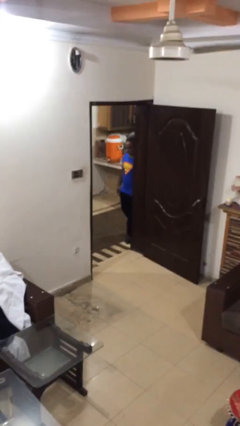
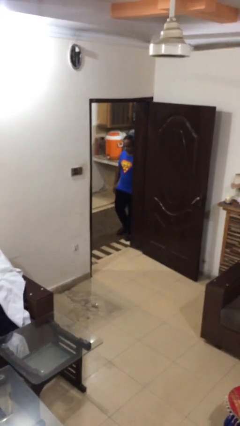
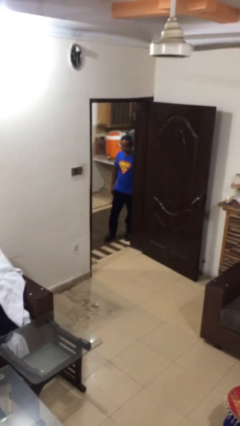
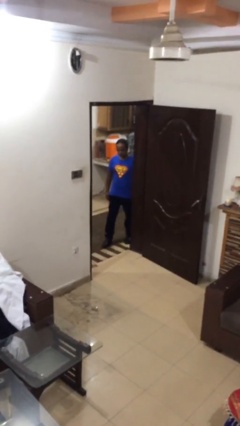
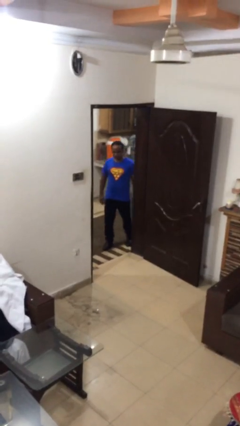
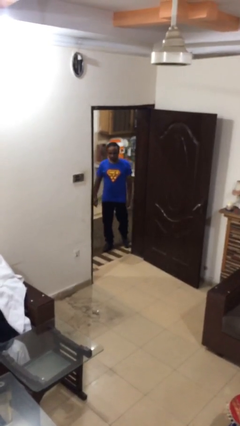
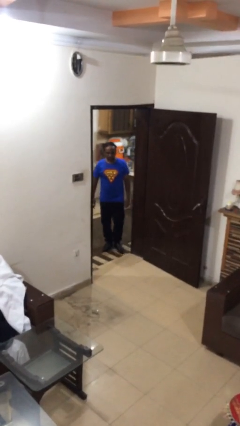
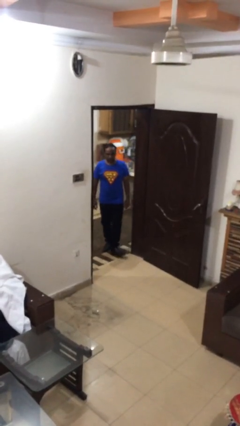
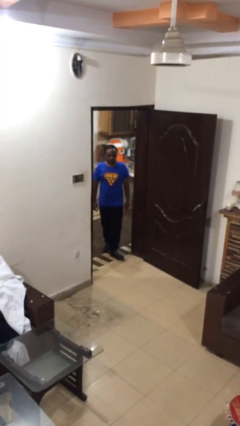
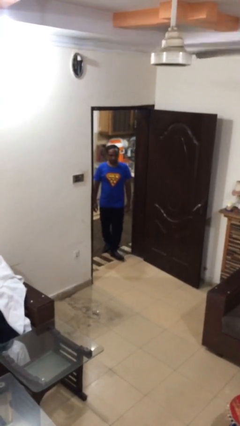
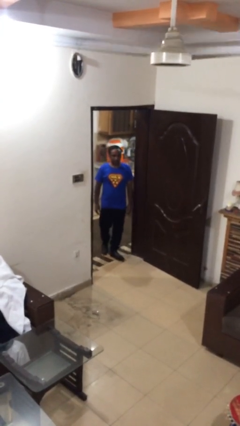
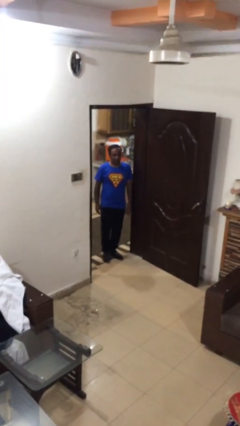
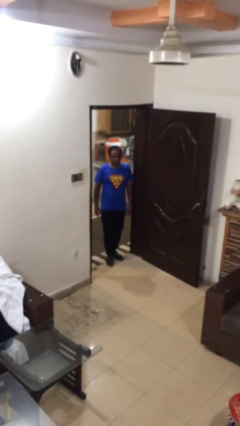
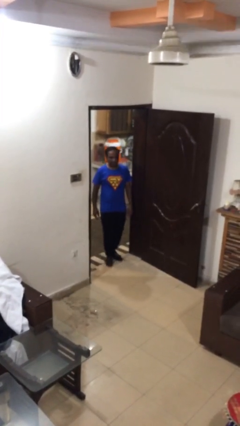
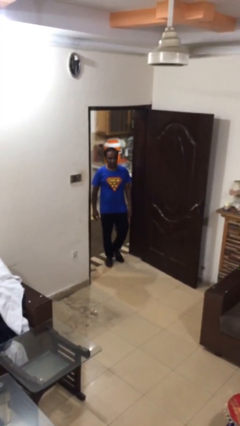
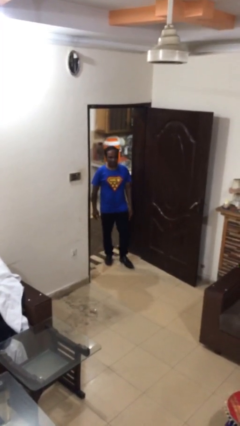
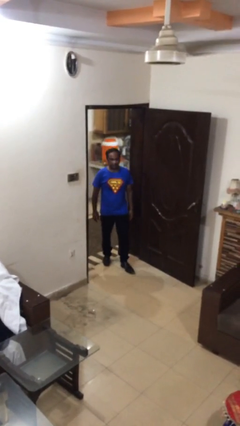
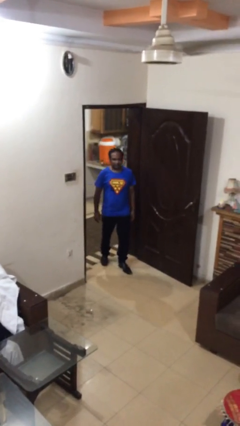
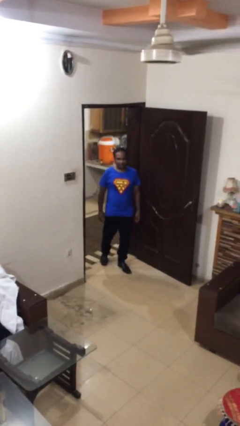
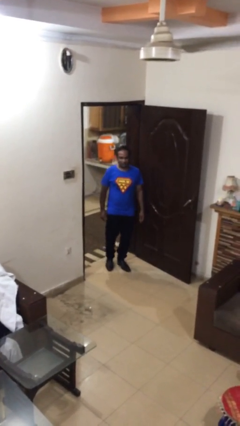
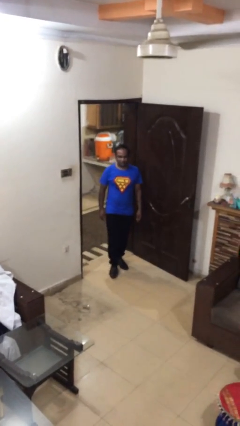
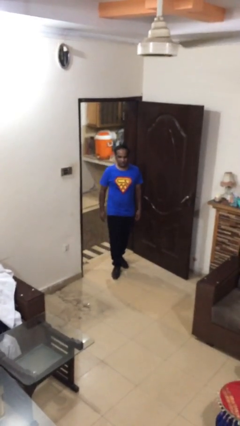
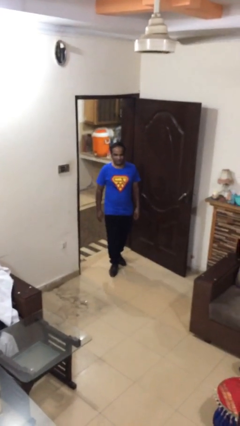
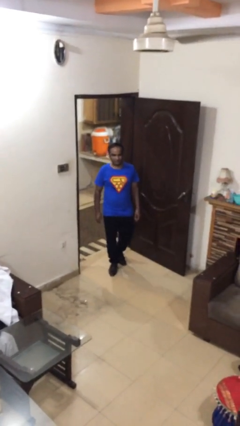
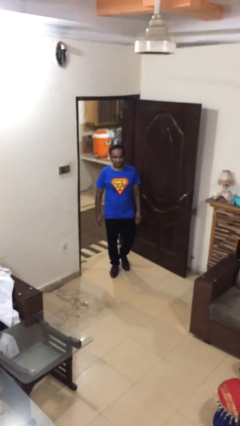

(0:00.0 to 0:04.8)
person enters scene through structure

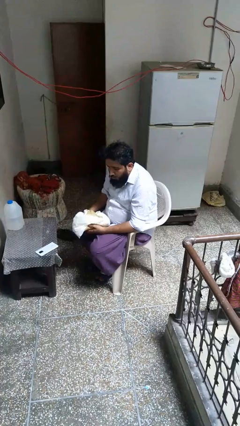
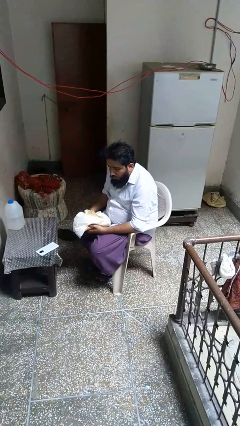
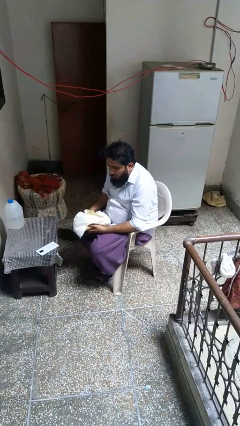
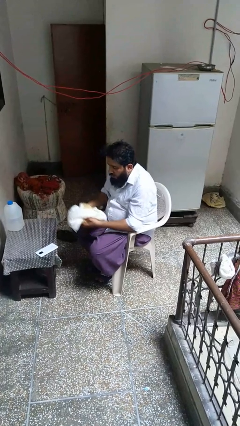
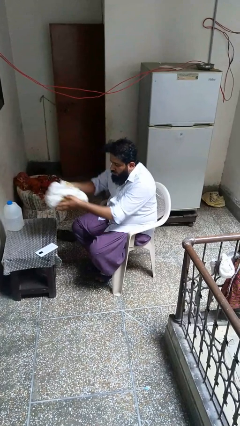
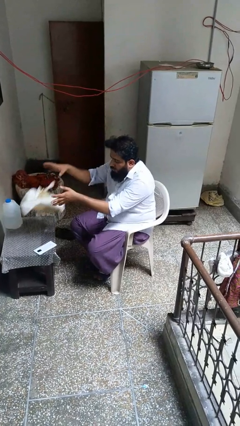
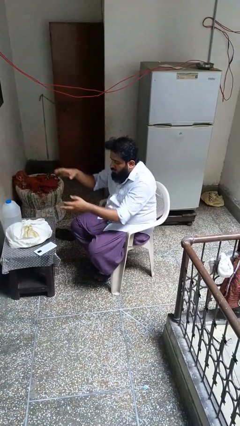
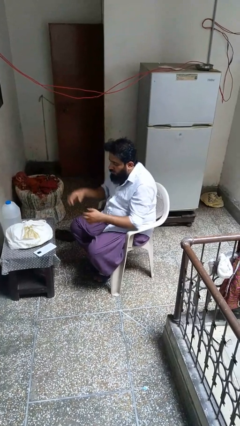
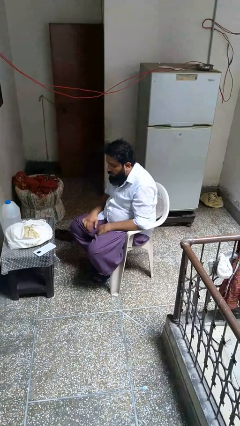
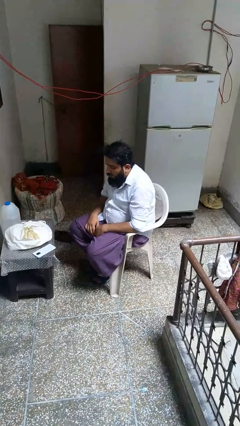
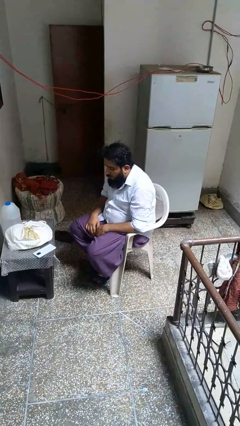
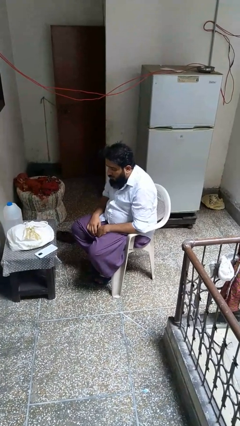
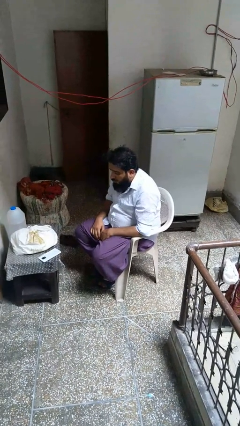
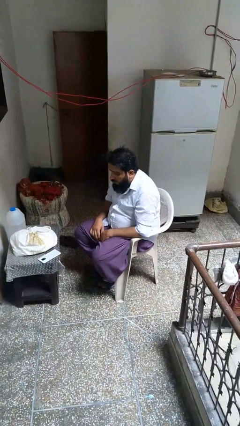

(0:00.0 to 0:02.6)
person throws object on table

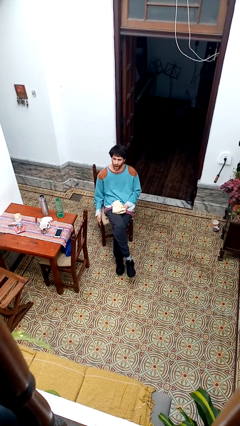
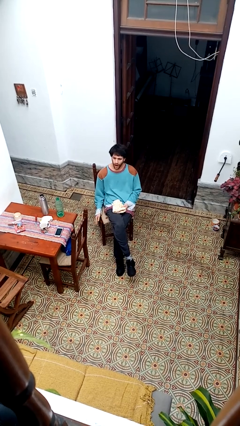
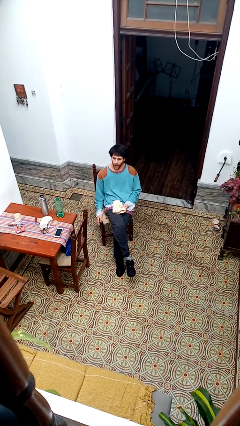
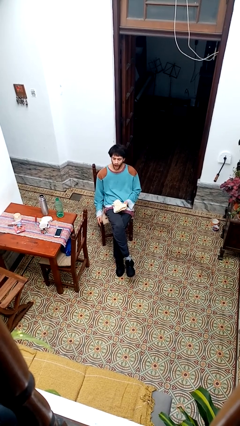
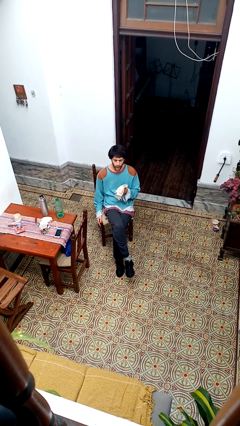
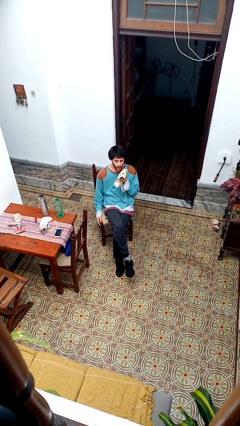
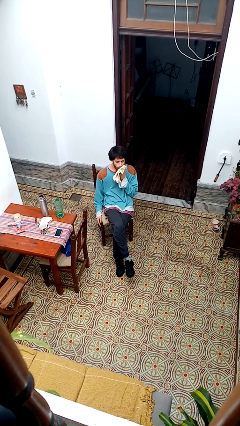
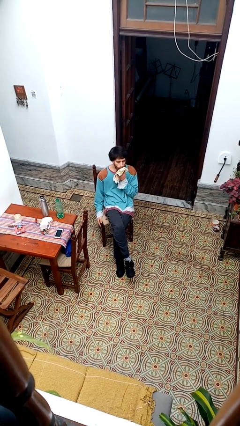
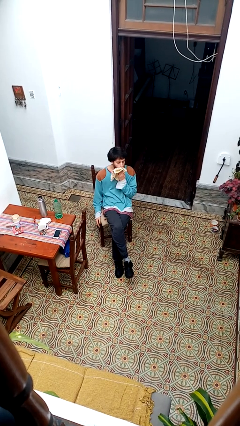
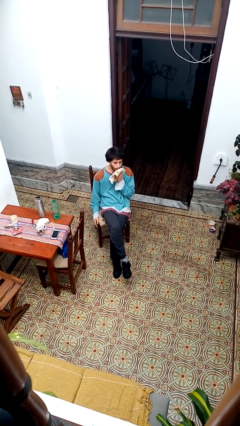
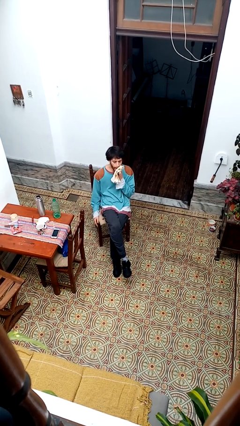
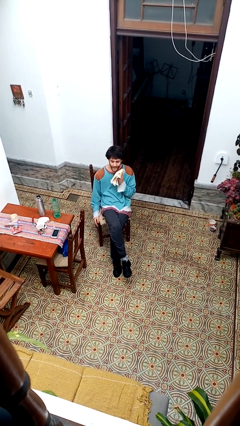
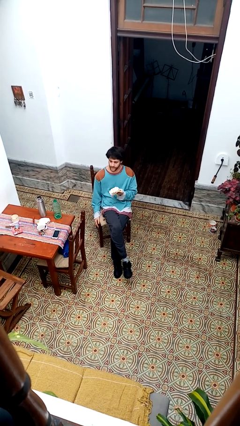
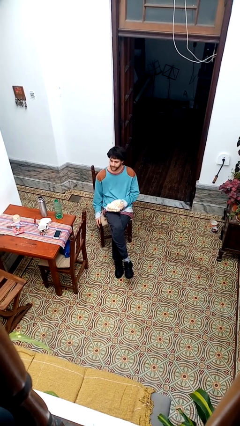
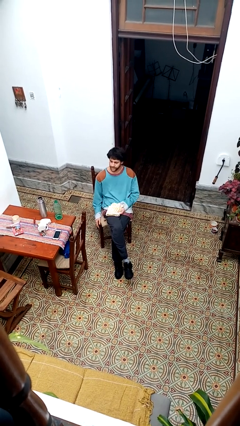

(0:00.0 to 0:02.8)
person wipes mouth with napkin

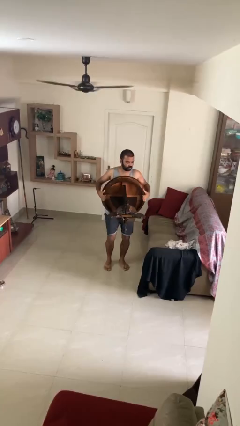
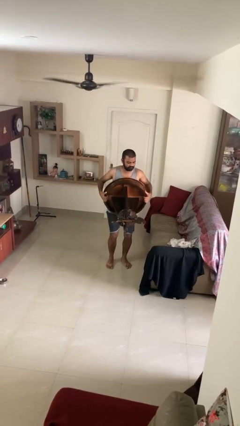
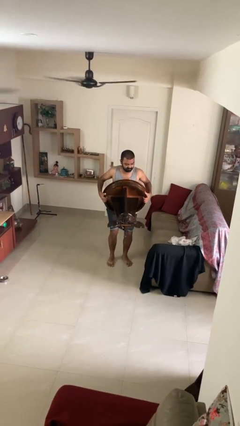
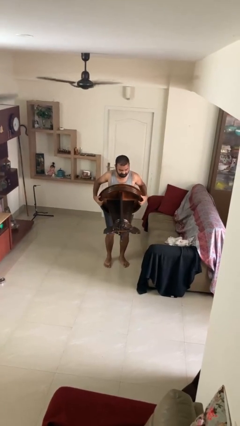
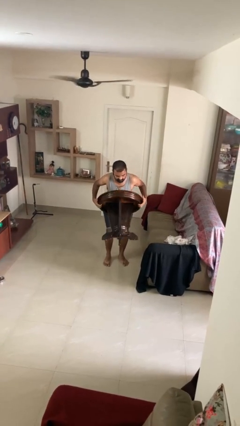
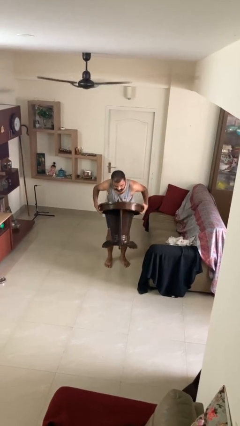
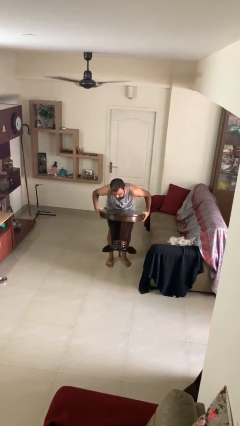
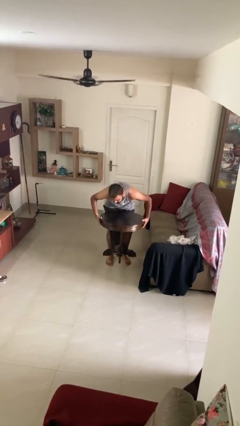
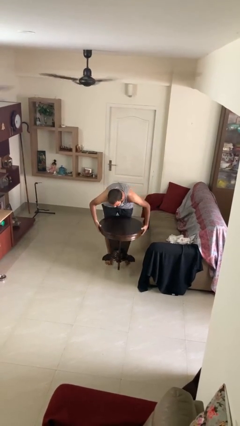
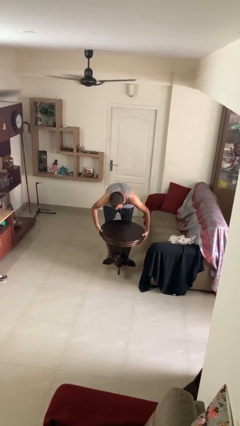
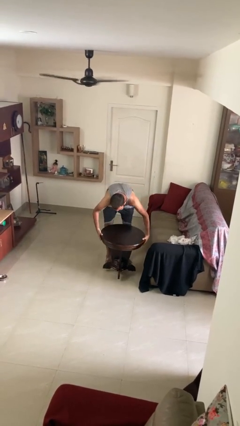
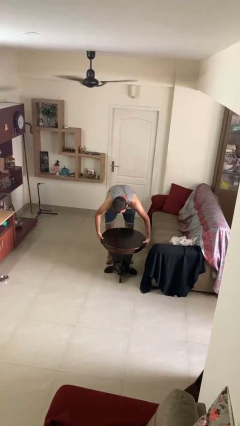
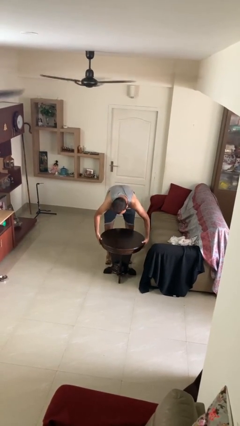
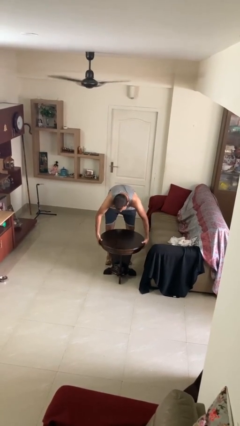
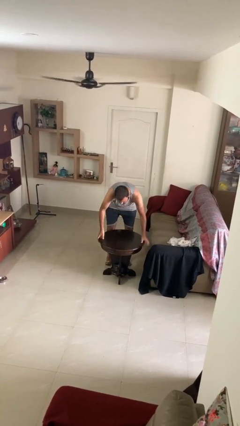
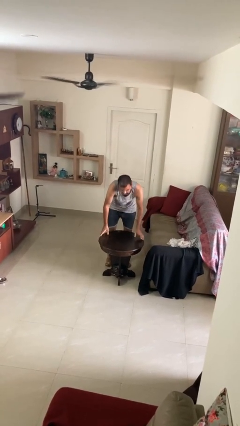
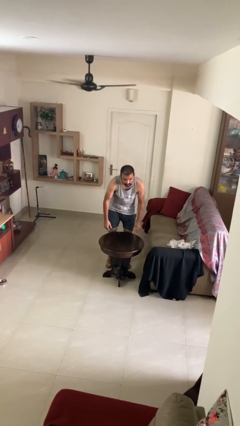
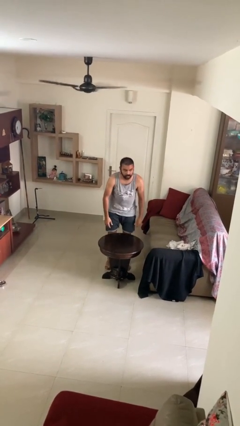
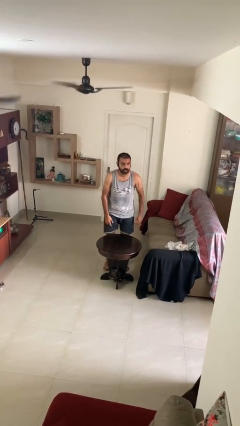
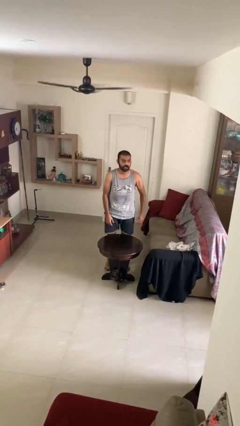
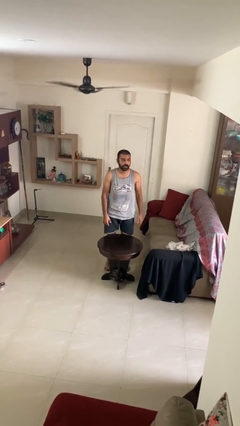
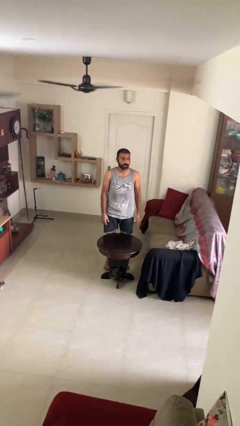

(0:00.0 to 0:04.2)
person puts down object on floor

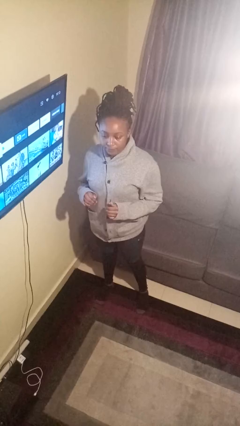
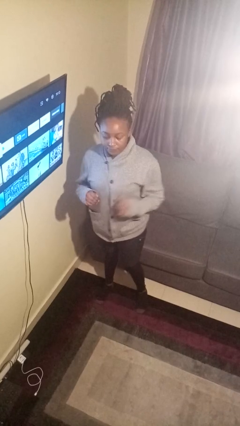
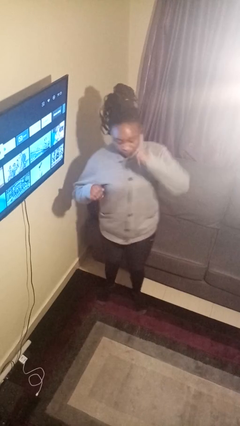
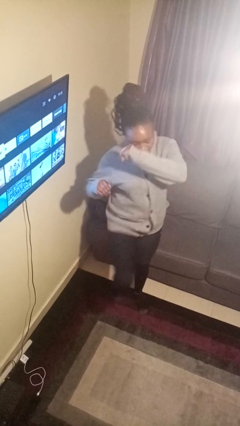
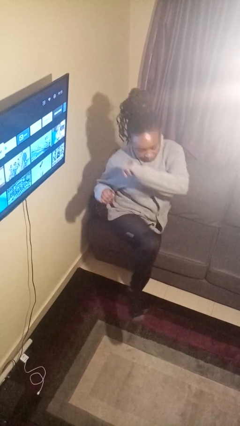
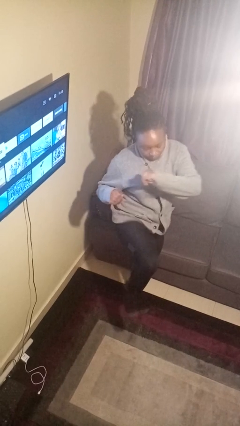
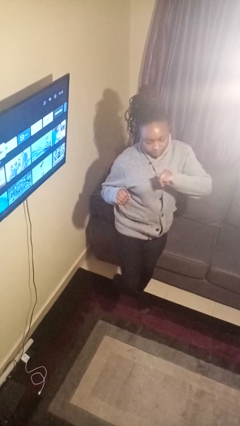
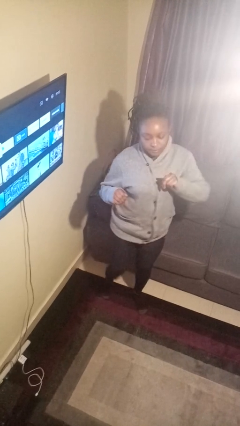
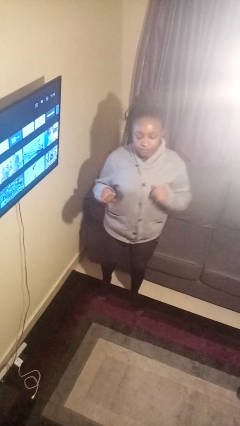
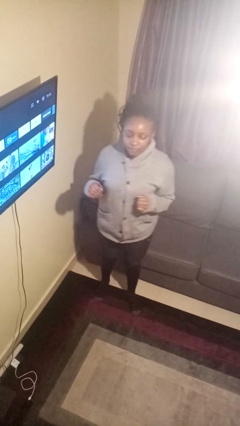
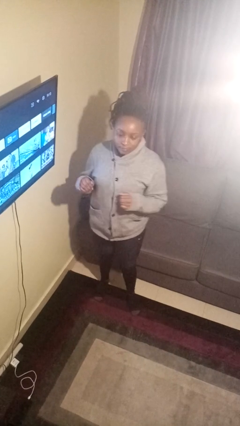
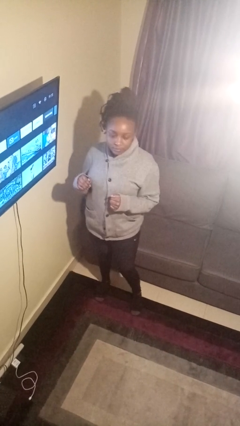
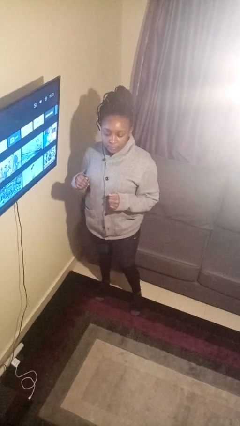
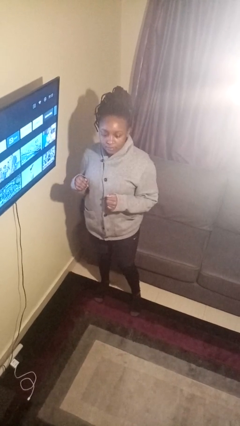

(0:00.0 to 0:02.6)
person karate kicks

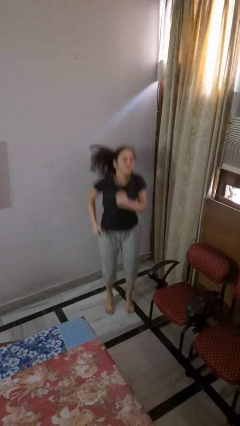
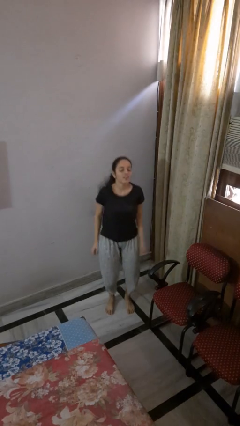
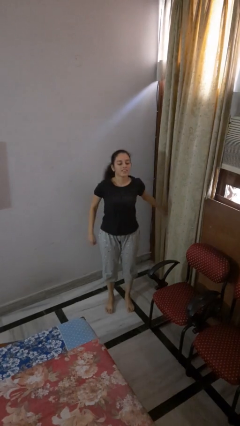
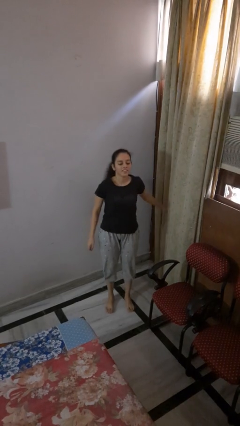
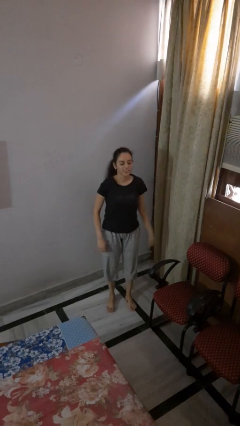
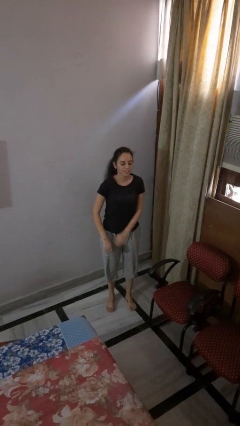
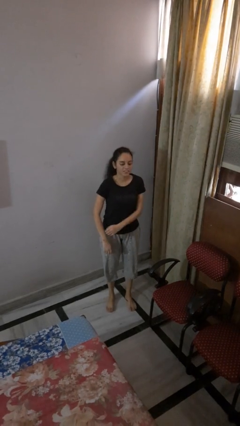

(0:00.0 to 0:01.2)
person jumps
